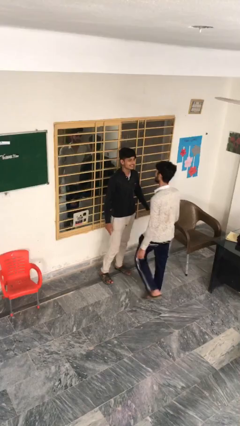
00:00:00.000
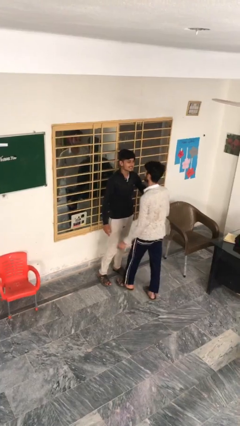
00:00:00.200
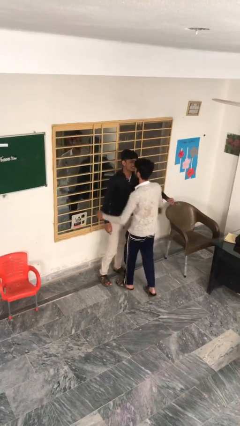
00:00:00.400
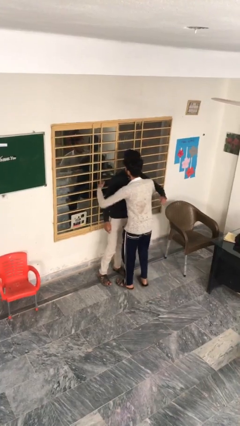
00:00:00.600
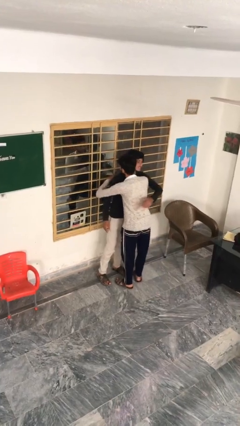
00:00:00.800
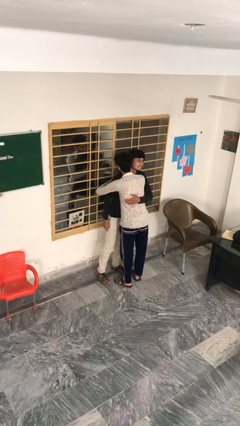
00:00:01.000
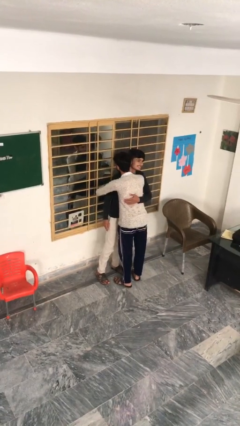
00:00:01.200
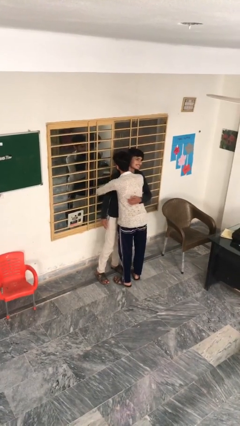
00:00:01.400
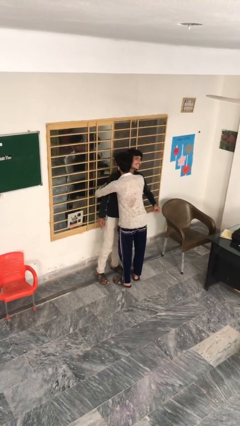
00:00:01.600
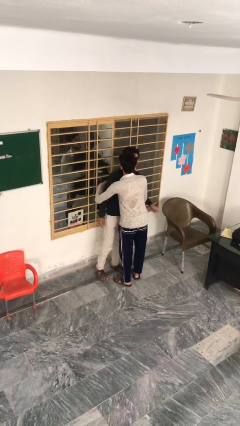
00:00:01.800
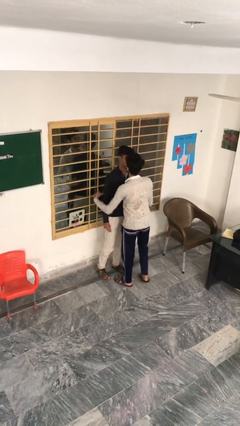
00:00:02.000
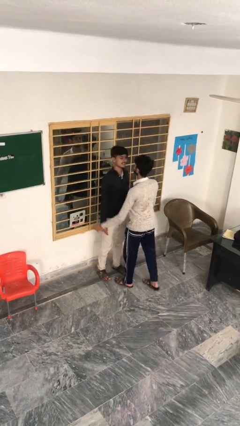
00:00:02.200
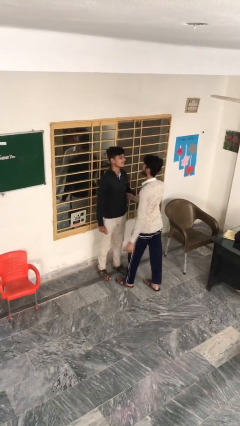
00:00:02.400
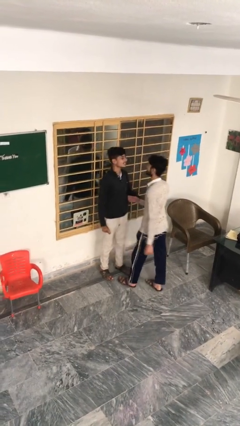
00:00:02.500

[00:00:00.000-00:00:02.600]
person embraces person

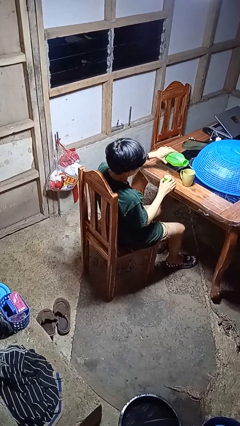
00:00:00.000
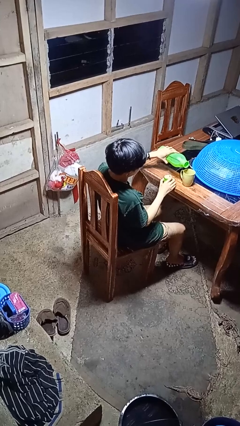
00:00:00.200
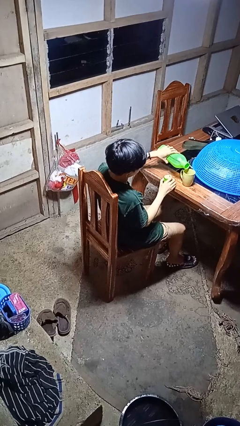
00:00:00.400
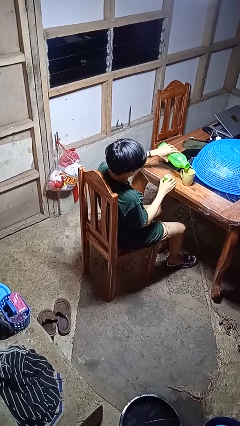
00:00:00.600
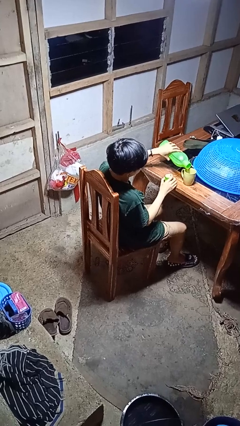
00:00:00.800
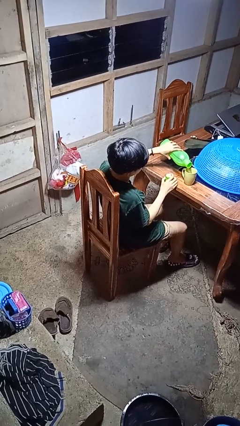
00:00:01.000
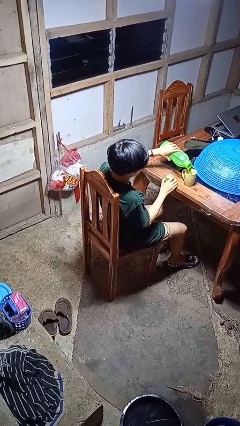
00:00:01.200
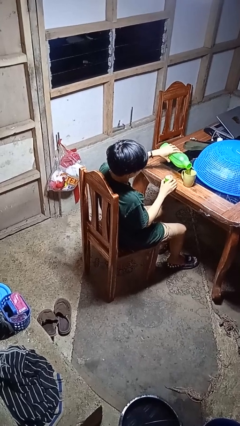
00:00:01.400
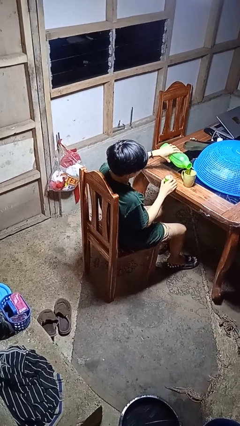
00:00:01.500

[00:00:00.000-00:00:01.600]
person pours liquid into cup

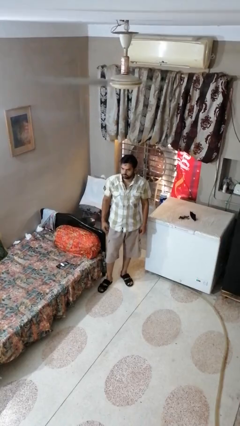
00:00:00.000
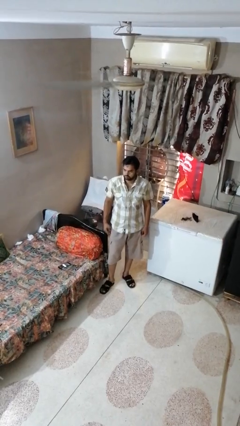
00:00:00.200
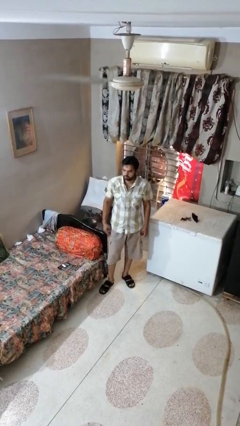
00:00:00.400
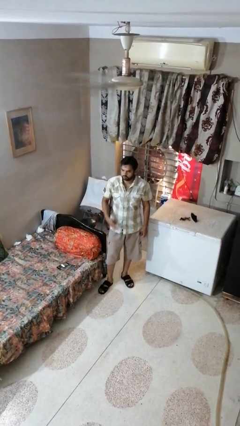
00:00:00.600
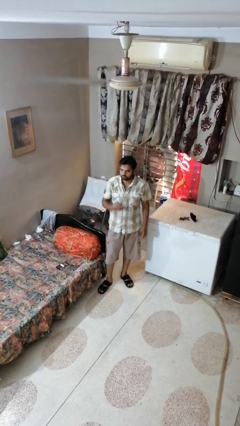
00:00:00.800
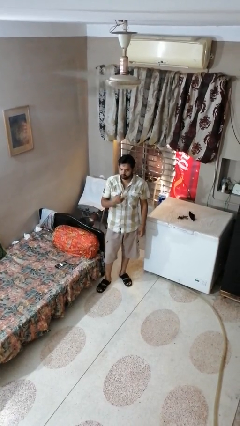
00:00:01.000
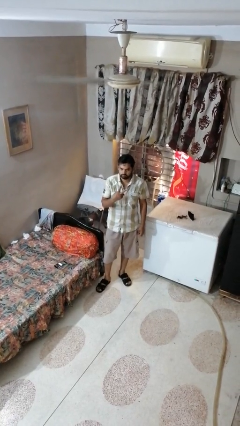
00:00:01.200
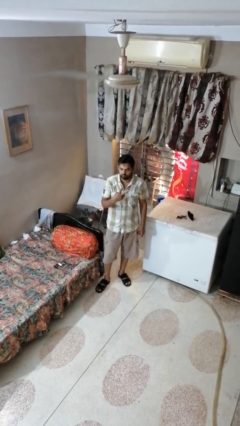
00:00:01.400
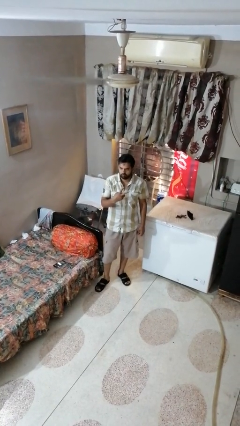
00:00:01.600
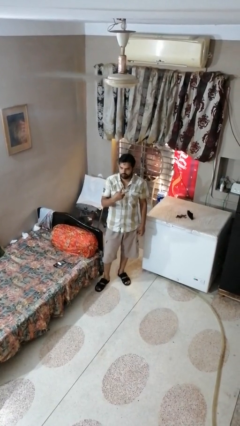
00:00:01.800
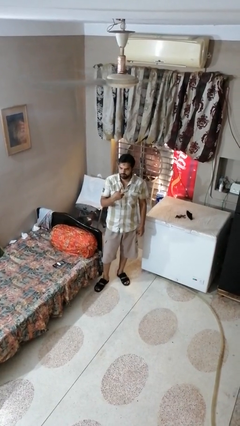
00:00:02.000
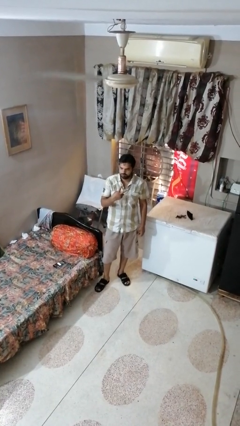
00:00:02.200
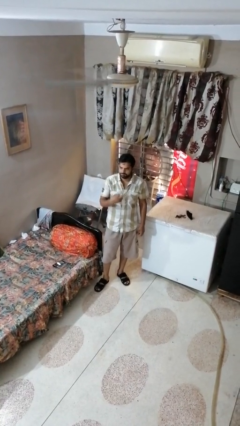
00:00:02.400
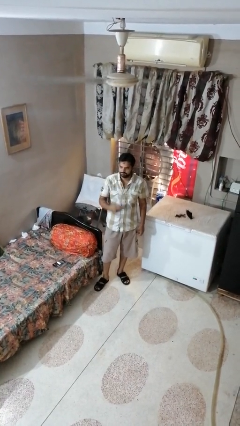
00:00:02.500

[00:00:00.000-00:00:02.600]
person gestures peace

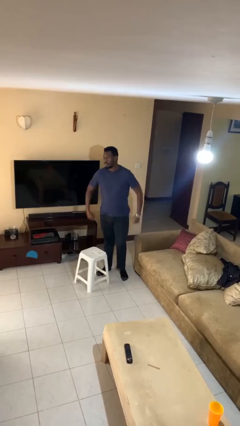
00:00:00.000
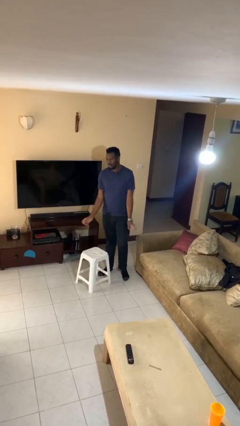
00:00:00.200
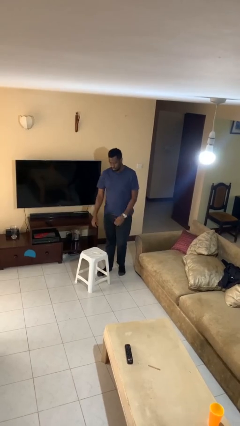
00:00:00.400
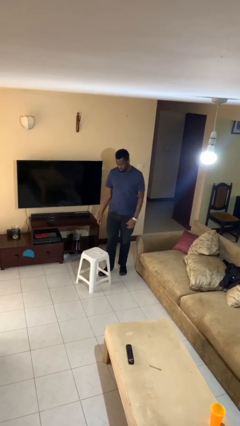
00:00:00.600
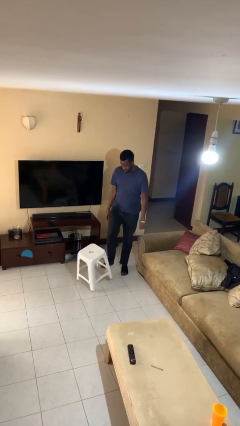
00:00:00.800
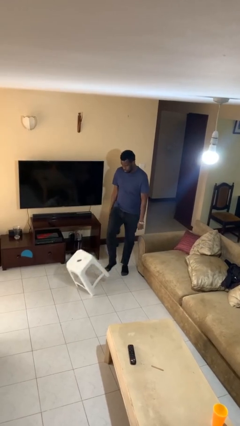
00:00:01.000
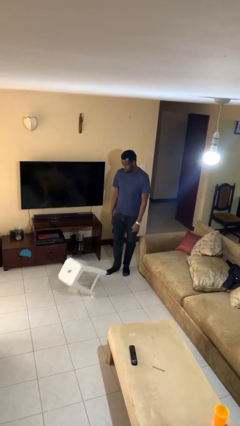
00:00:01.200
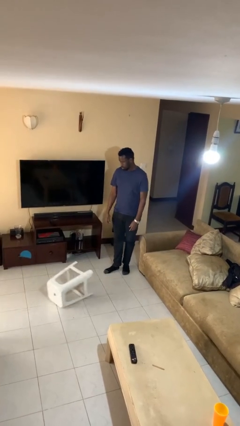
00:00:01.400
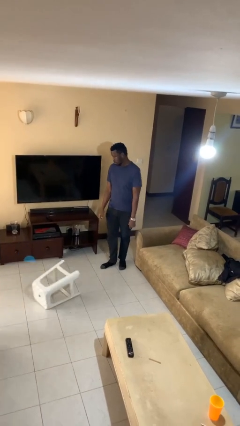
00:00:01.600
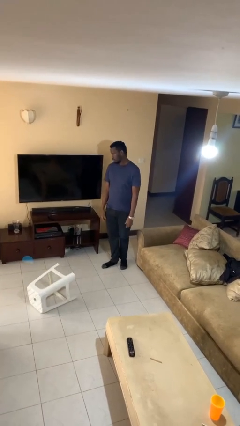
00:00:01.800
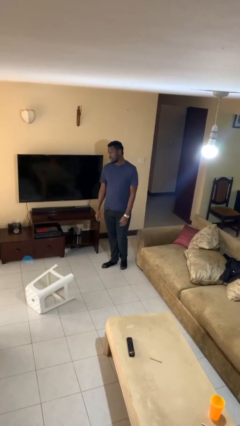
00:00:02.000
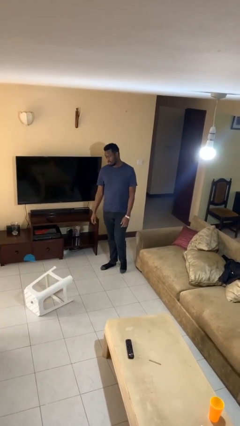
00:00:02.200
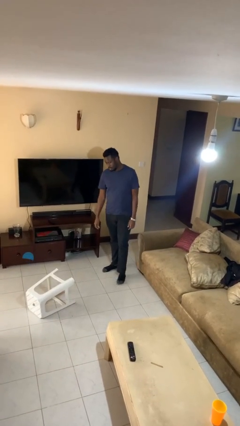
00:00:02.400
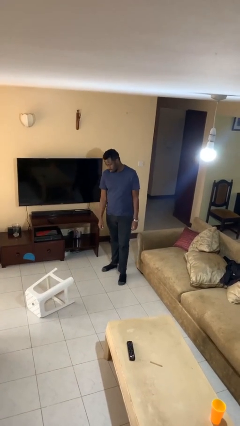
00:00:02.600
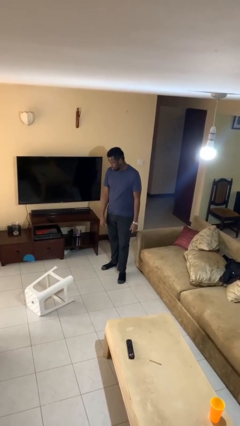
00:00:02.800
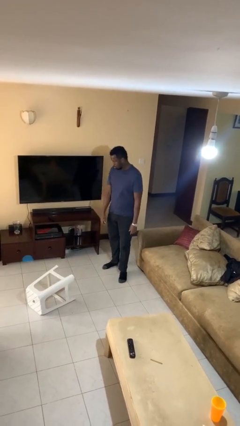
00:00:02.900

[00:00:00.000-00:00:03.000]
person knocks over furniture

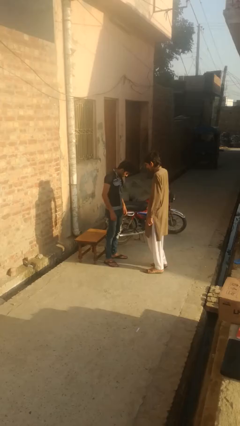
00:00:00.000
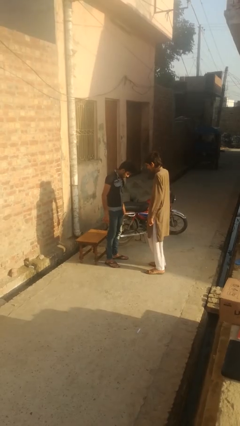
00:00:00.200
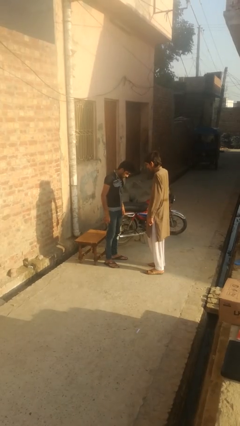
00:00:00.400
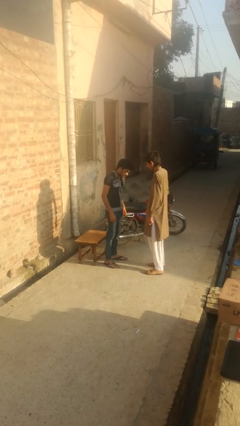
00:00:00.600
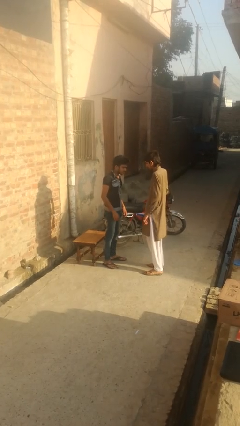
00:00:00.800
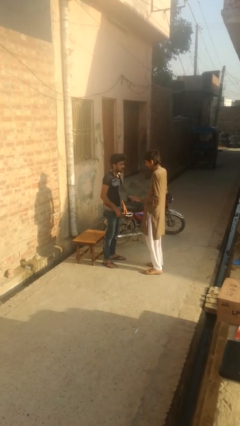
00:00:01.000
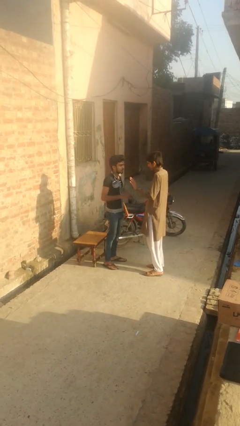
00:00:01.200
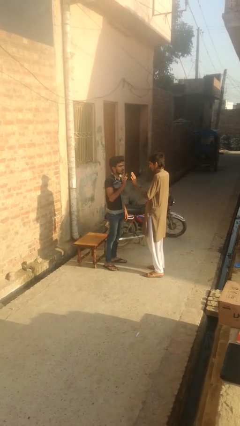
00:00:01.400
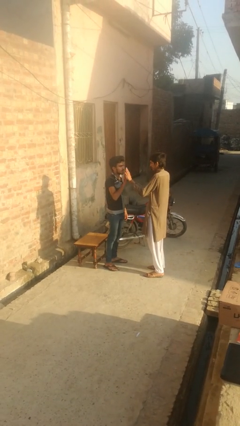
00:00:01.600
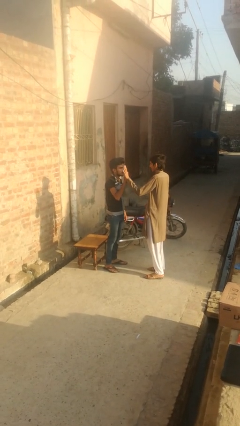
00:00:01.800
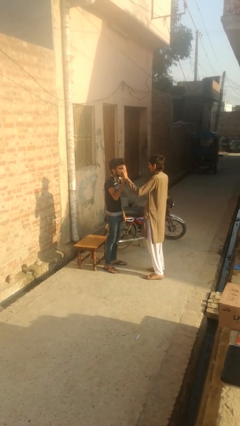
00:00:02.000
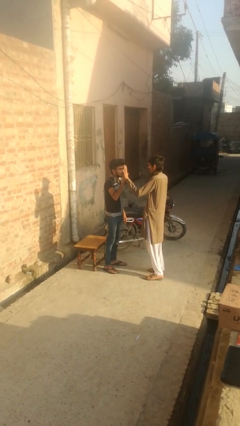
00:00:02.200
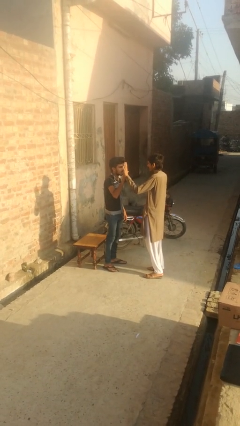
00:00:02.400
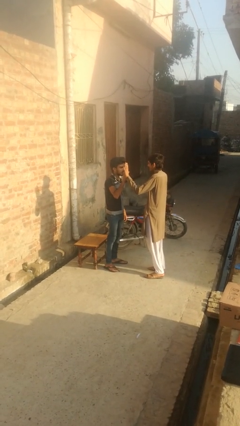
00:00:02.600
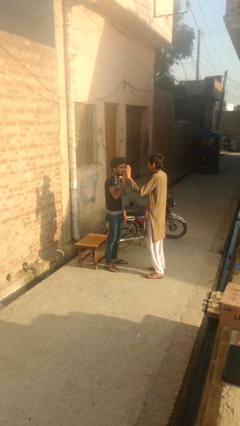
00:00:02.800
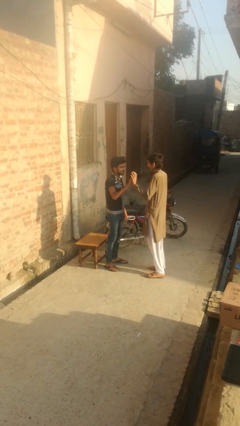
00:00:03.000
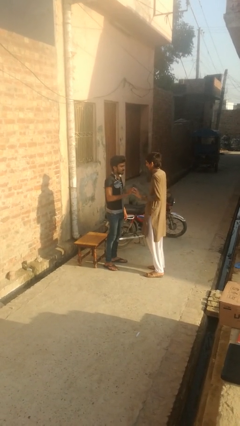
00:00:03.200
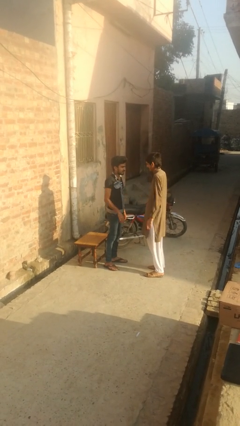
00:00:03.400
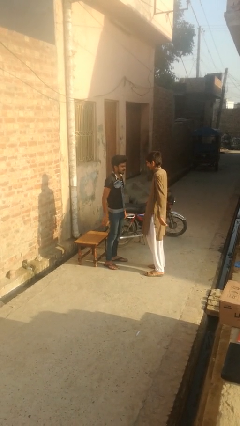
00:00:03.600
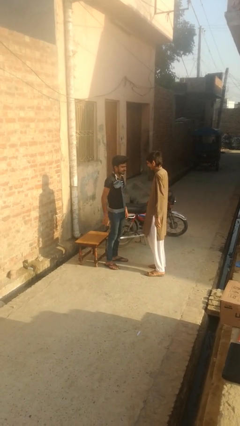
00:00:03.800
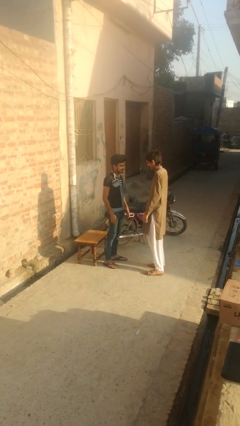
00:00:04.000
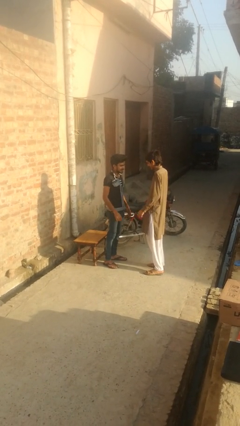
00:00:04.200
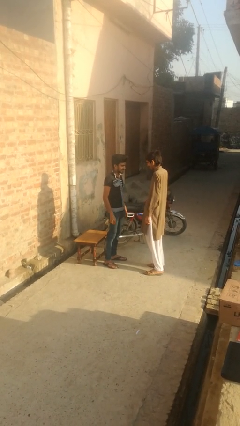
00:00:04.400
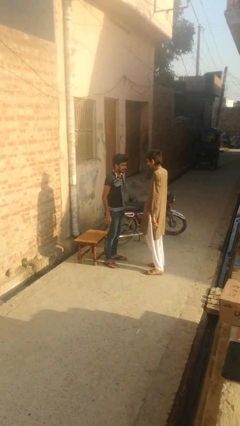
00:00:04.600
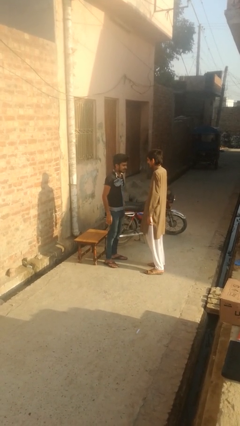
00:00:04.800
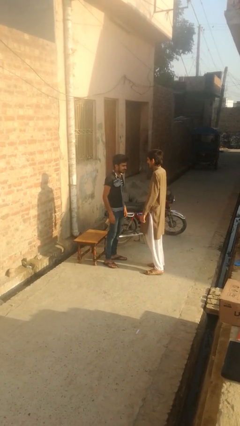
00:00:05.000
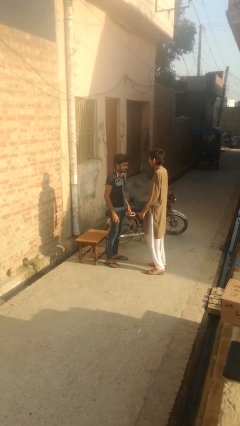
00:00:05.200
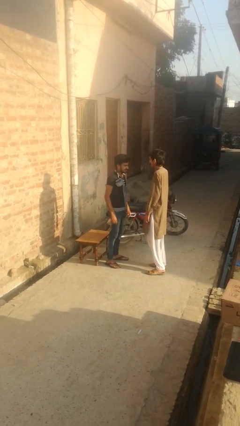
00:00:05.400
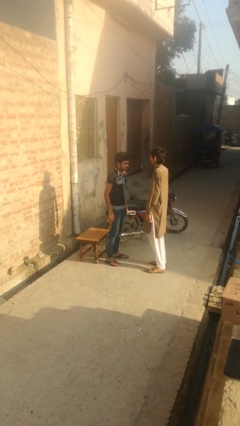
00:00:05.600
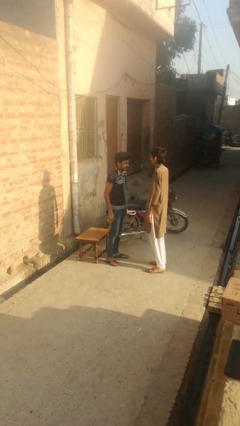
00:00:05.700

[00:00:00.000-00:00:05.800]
person highfives hand

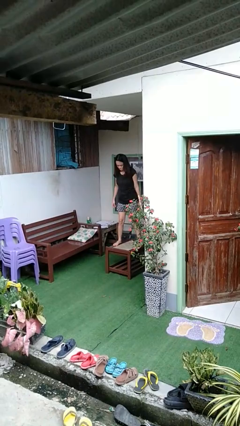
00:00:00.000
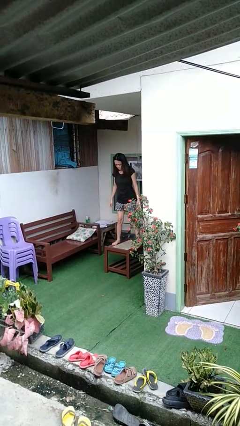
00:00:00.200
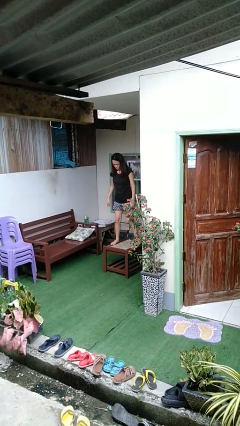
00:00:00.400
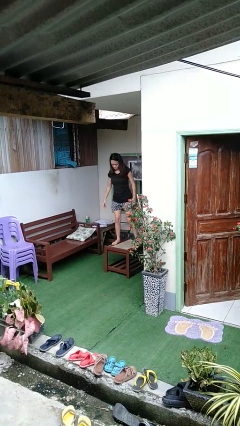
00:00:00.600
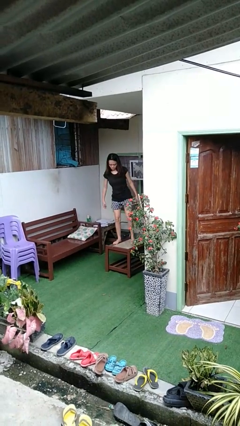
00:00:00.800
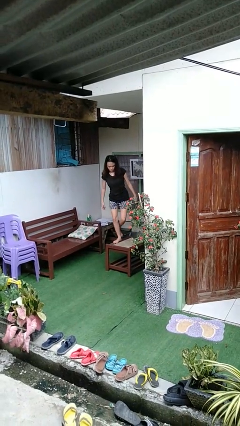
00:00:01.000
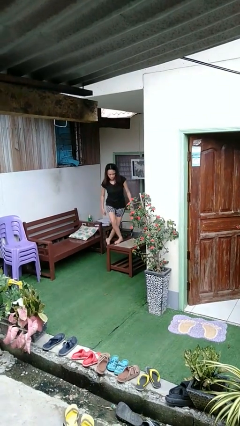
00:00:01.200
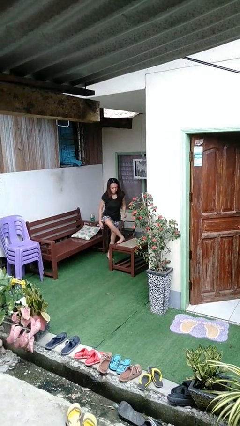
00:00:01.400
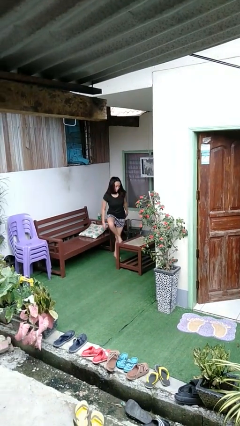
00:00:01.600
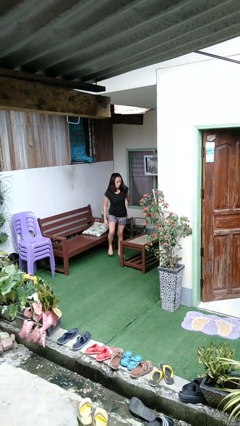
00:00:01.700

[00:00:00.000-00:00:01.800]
person climbs off table
